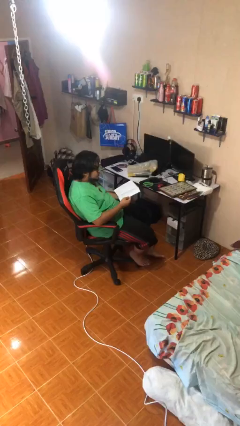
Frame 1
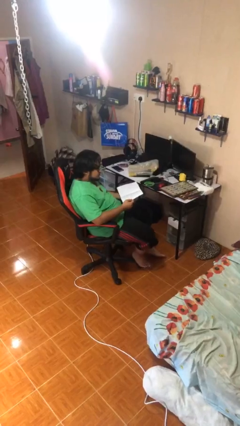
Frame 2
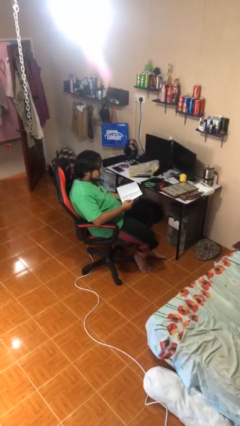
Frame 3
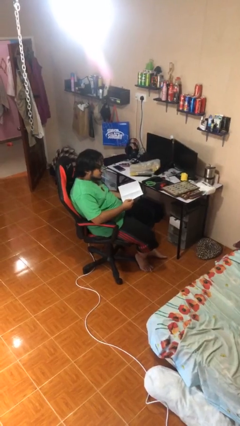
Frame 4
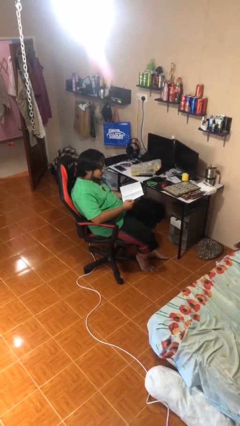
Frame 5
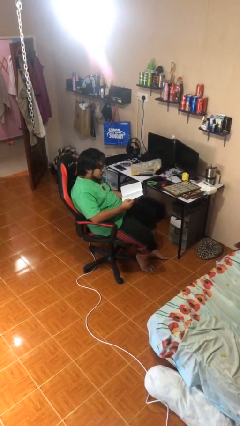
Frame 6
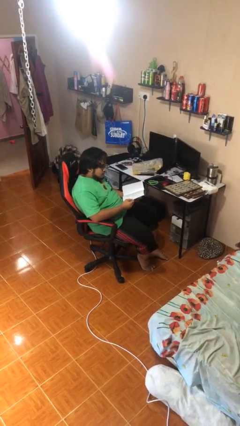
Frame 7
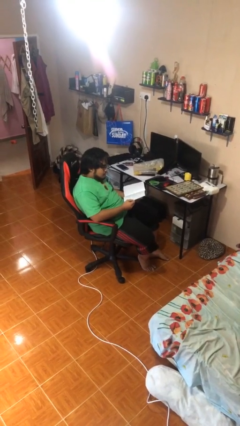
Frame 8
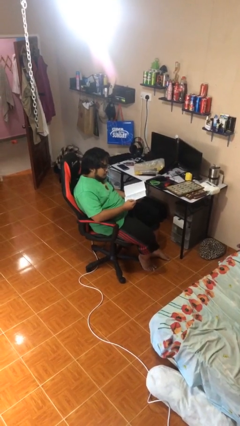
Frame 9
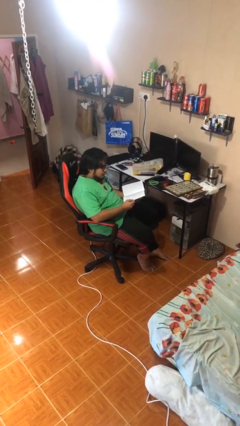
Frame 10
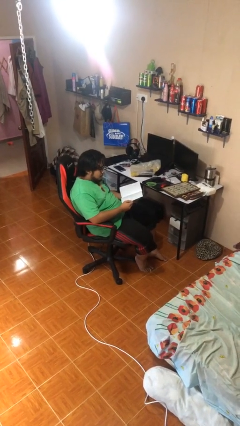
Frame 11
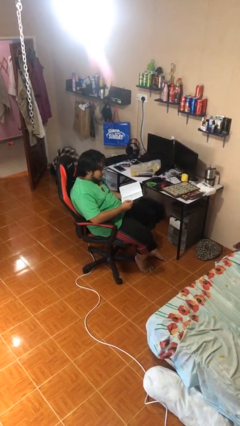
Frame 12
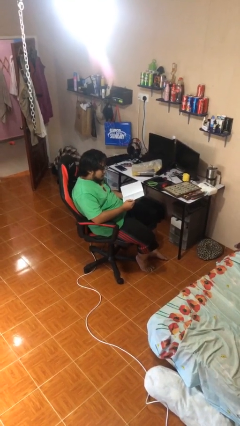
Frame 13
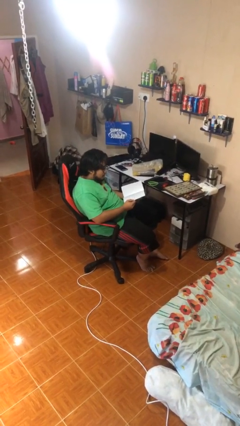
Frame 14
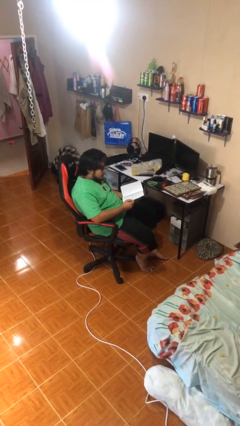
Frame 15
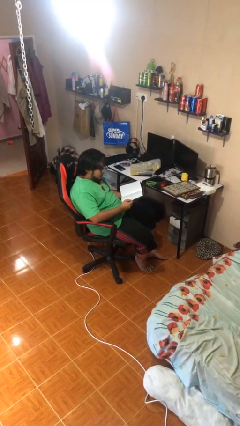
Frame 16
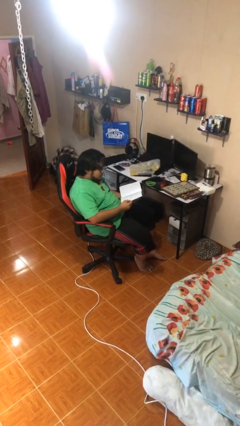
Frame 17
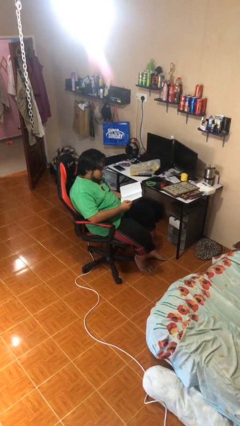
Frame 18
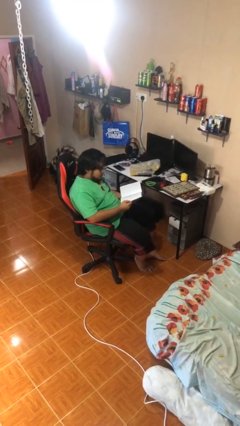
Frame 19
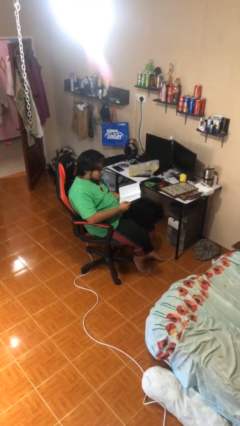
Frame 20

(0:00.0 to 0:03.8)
person reads document

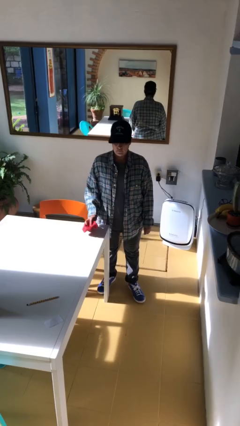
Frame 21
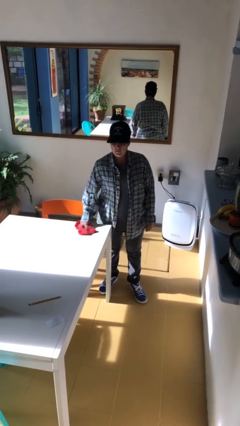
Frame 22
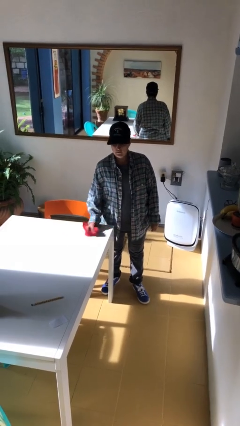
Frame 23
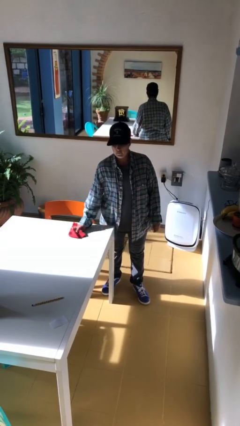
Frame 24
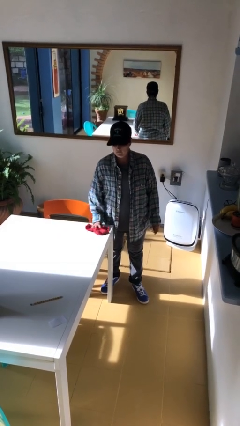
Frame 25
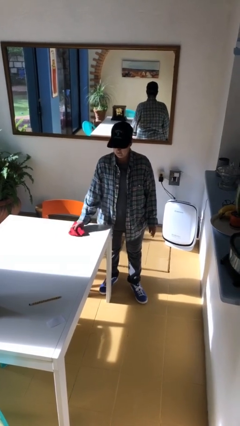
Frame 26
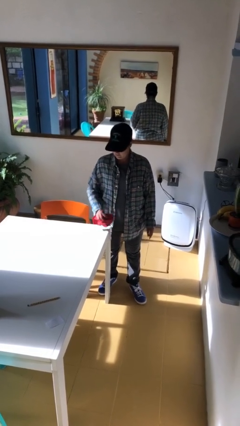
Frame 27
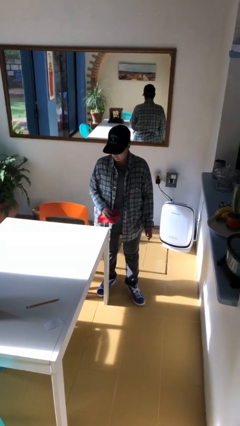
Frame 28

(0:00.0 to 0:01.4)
person cleans table with rag

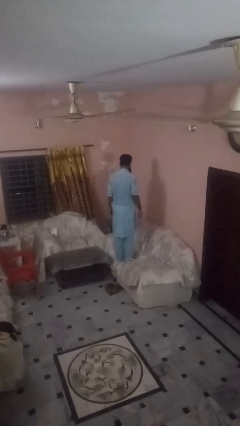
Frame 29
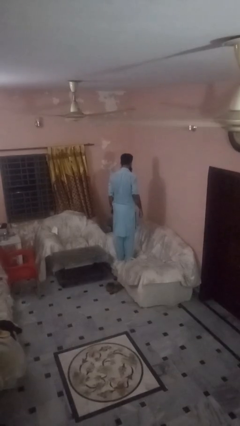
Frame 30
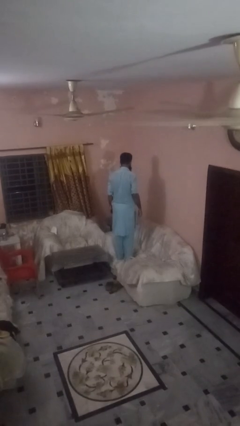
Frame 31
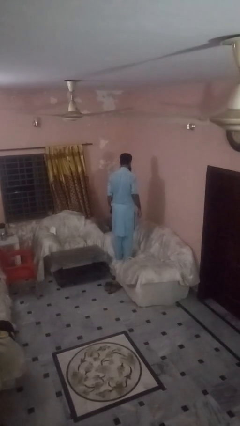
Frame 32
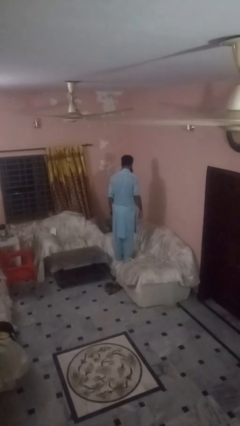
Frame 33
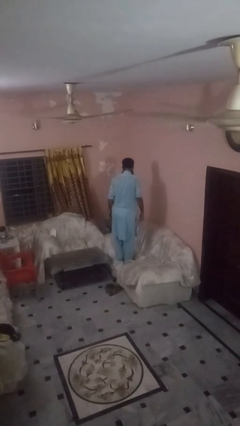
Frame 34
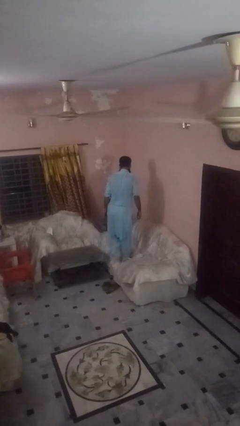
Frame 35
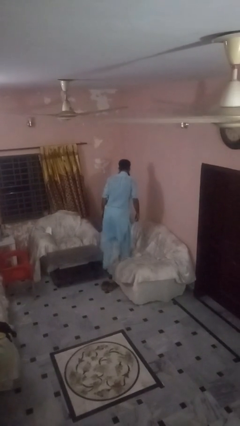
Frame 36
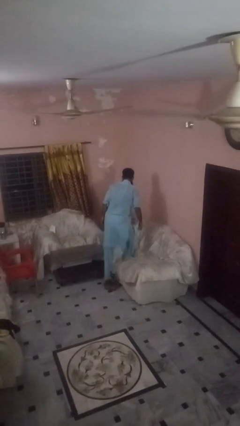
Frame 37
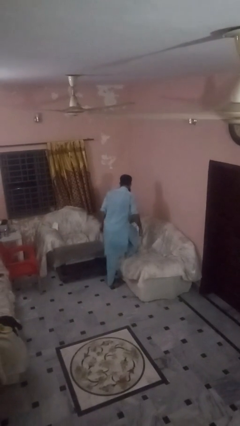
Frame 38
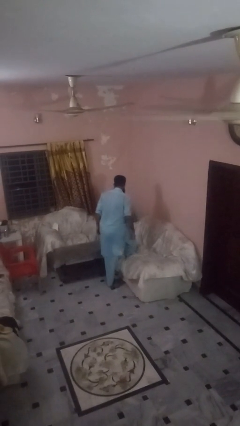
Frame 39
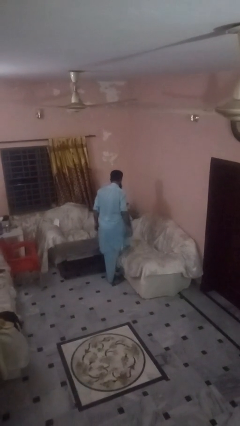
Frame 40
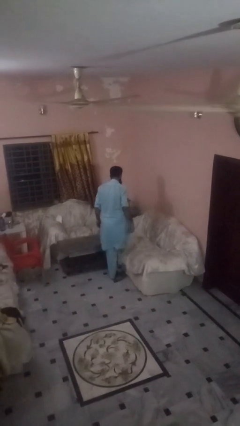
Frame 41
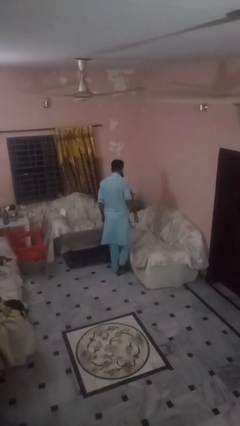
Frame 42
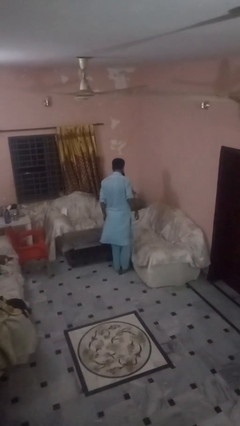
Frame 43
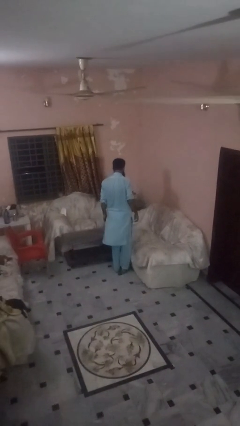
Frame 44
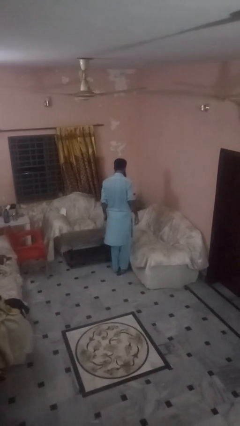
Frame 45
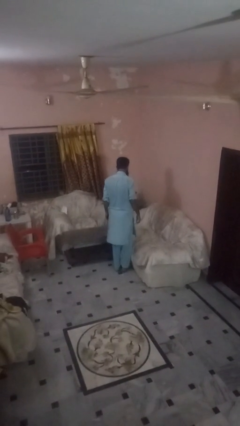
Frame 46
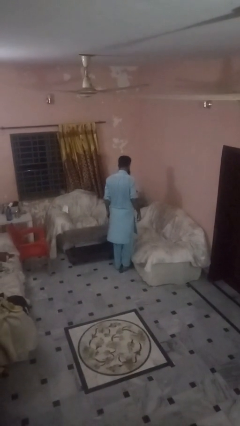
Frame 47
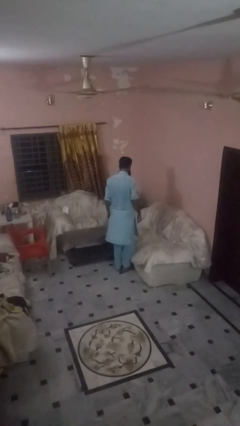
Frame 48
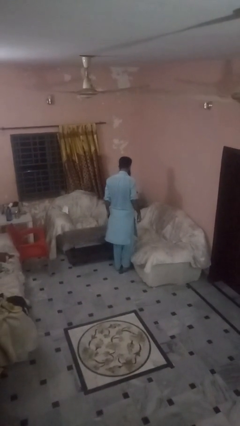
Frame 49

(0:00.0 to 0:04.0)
person climbs off couch

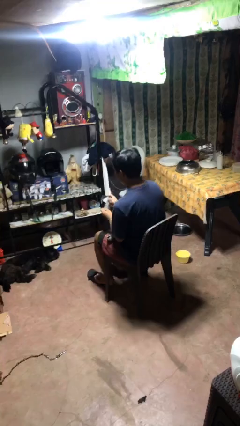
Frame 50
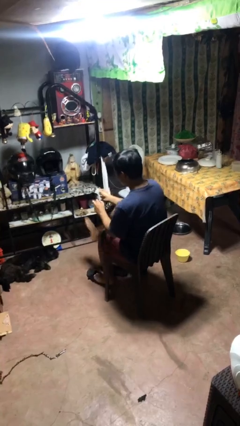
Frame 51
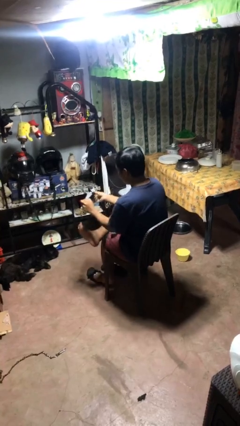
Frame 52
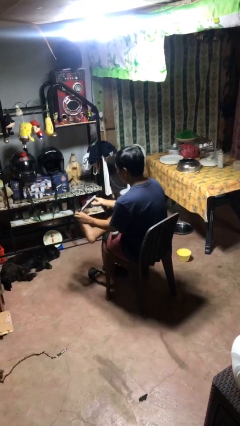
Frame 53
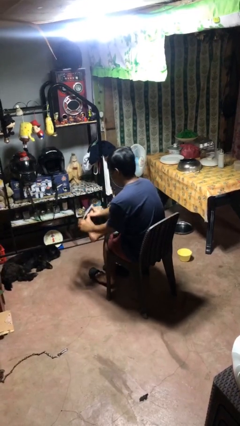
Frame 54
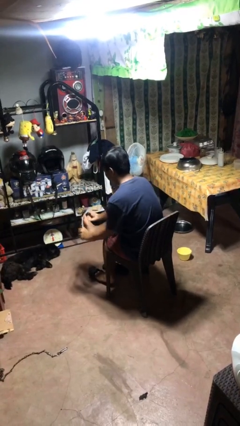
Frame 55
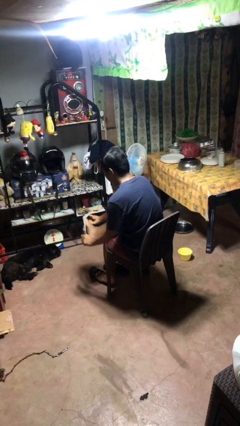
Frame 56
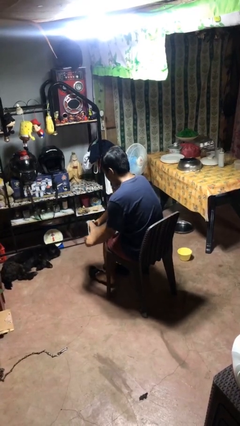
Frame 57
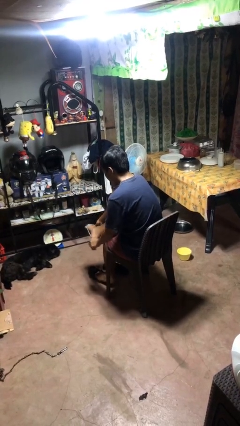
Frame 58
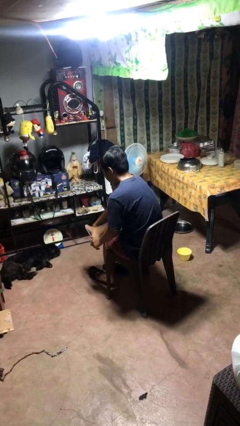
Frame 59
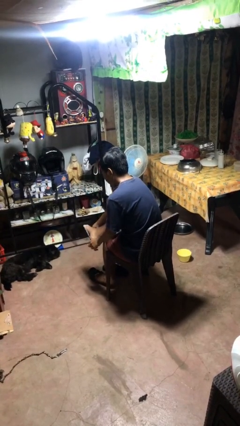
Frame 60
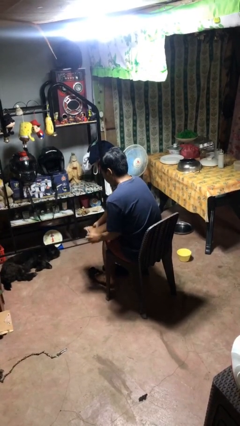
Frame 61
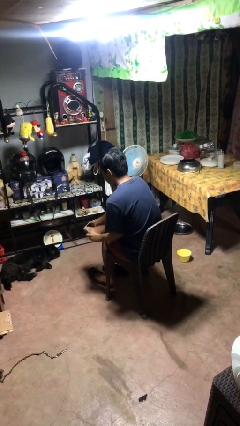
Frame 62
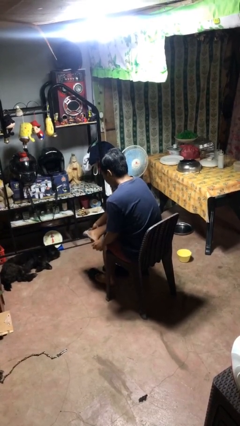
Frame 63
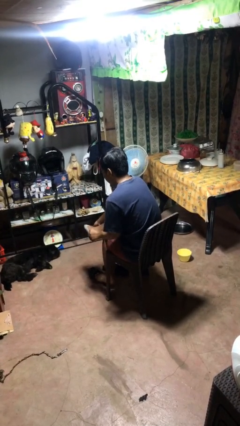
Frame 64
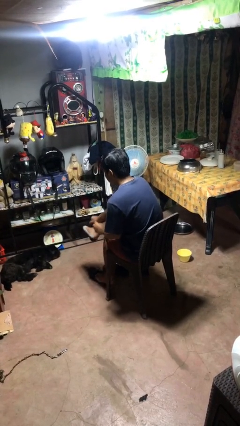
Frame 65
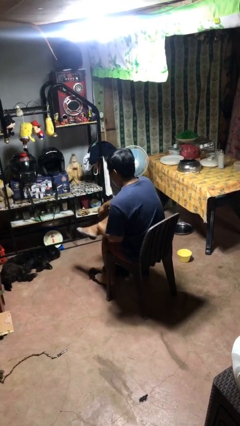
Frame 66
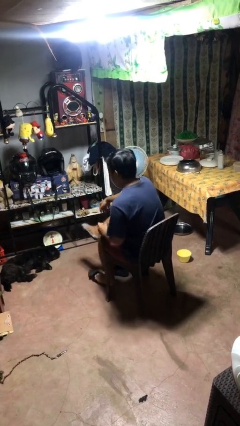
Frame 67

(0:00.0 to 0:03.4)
person puts on socks

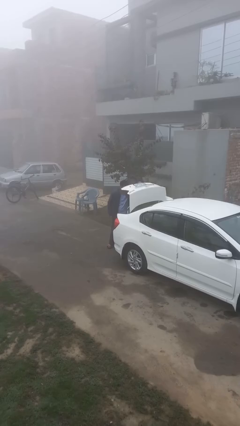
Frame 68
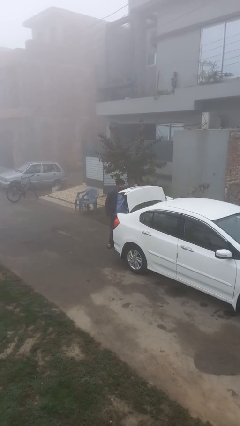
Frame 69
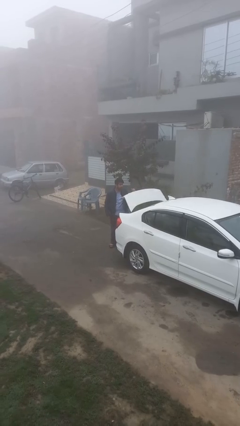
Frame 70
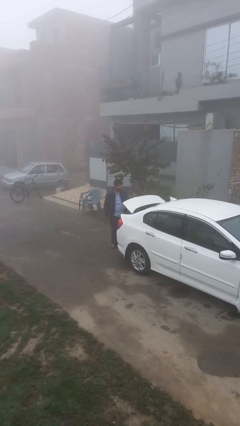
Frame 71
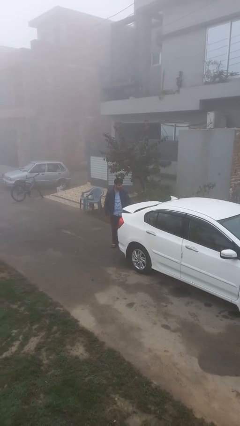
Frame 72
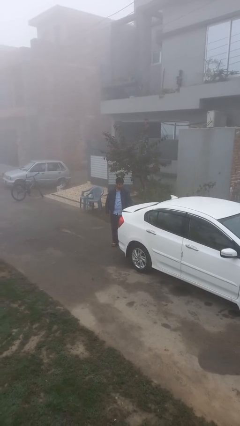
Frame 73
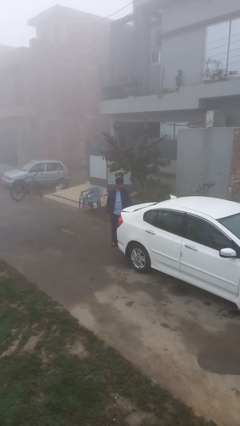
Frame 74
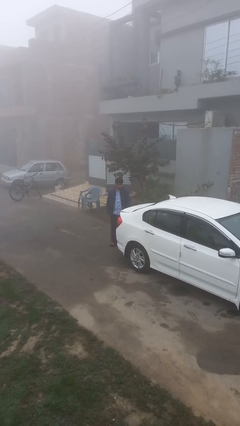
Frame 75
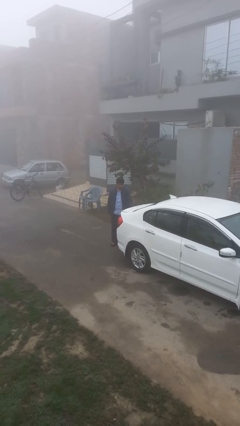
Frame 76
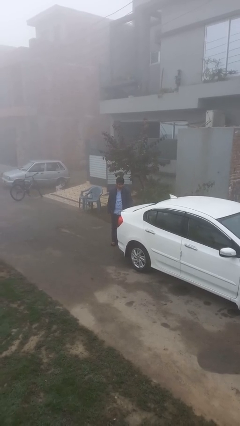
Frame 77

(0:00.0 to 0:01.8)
person closes car trunk

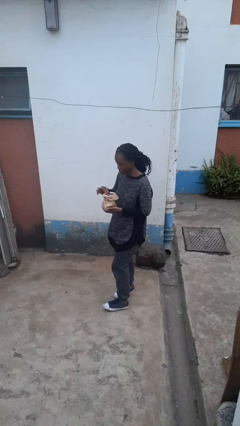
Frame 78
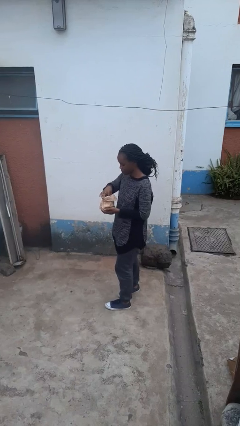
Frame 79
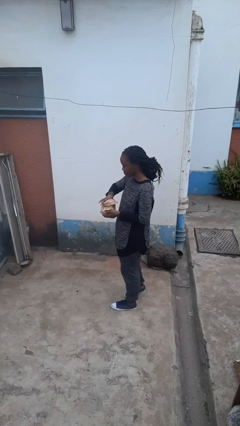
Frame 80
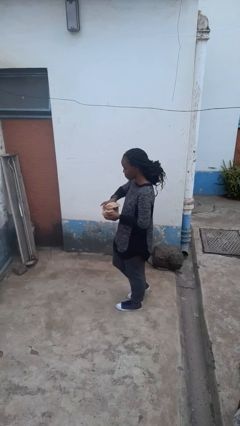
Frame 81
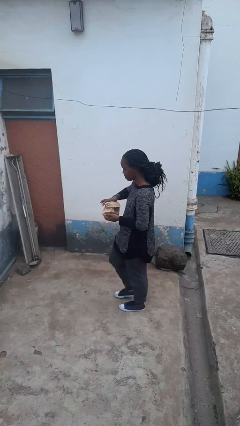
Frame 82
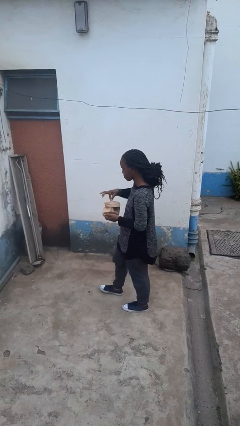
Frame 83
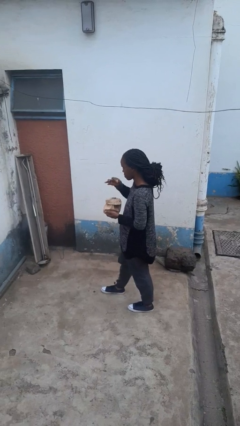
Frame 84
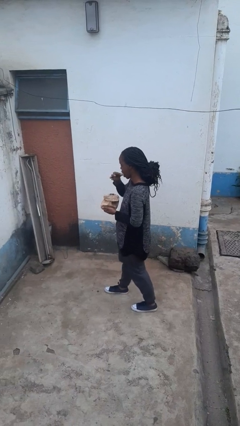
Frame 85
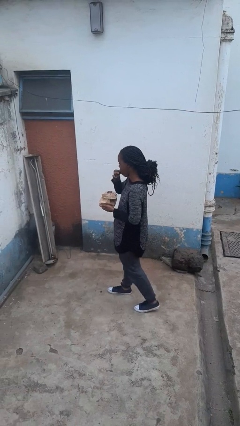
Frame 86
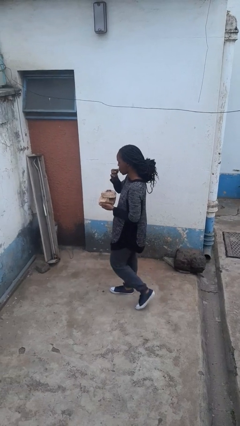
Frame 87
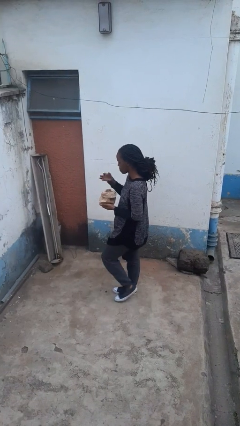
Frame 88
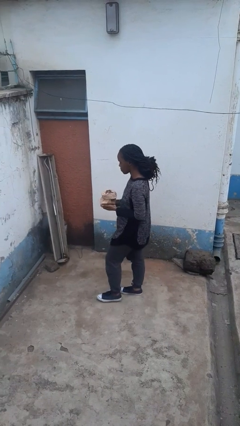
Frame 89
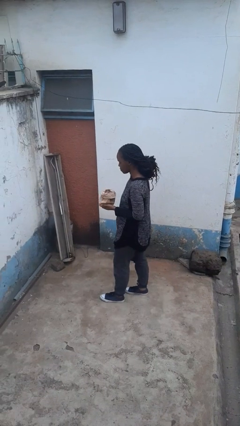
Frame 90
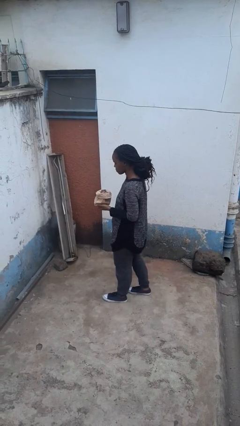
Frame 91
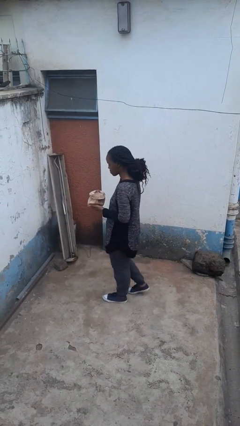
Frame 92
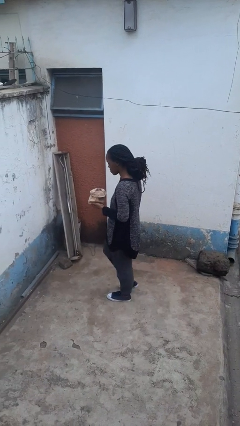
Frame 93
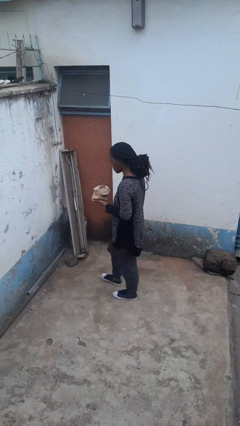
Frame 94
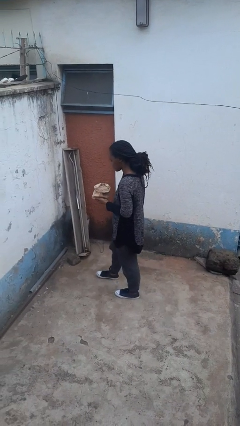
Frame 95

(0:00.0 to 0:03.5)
person eats snack from bag
